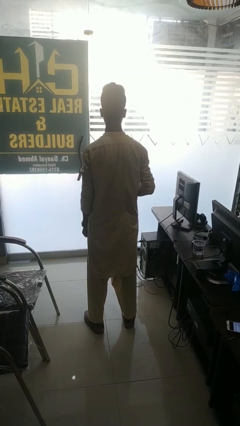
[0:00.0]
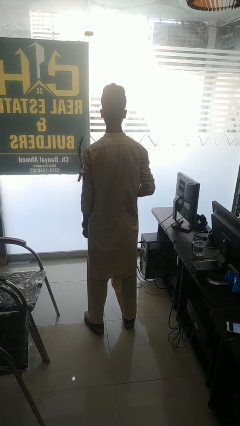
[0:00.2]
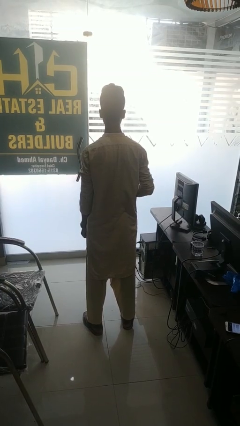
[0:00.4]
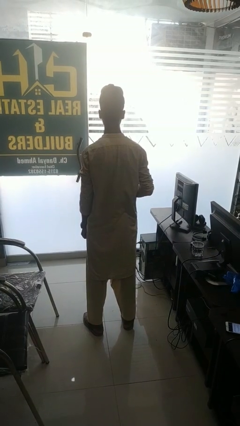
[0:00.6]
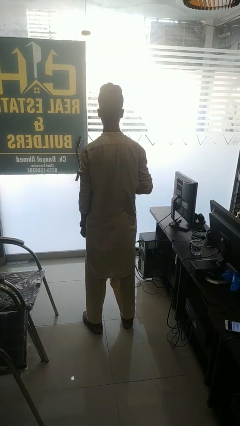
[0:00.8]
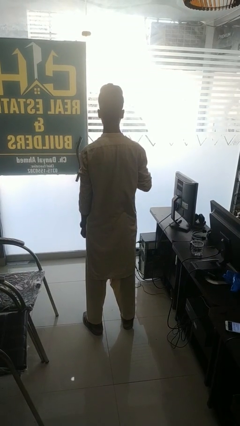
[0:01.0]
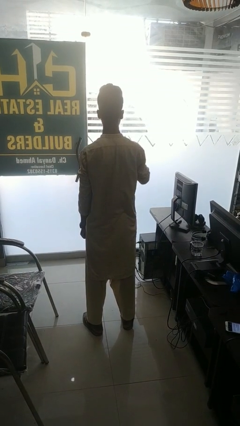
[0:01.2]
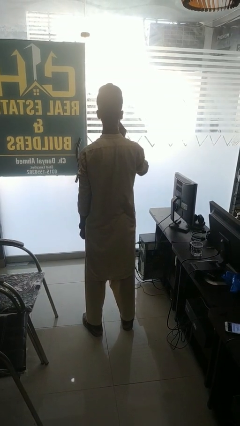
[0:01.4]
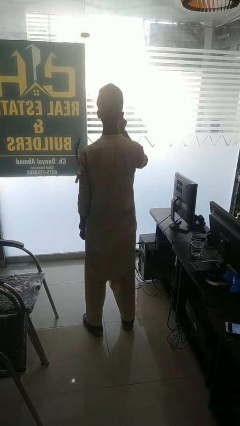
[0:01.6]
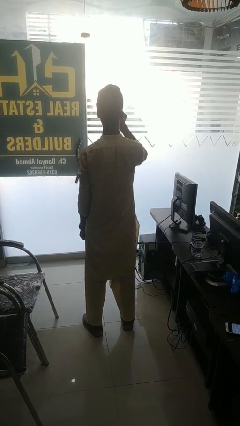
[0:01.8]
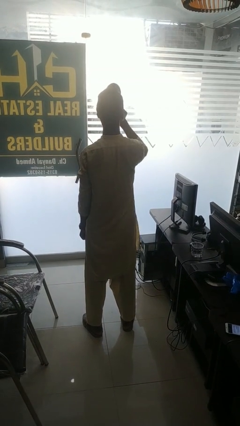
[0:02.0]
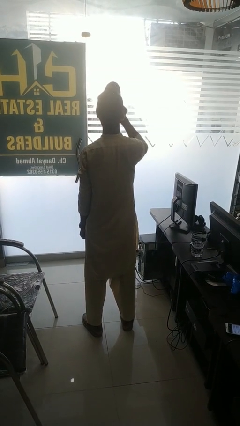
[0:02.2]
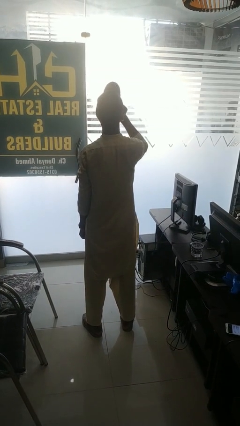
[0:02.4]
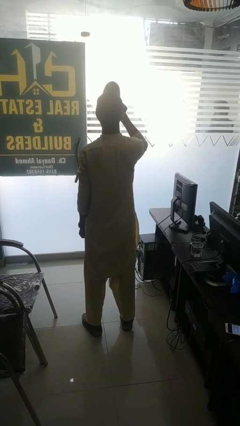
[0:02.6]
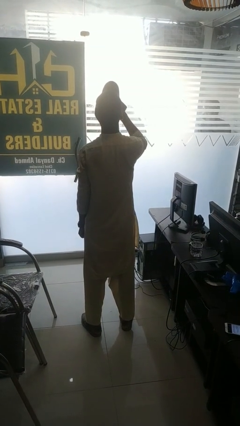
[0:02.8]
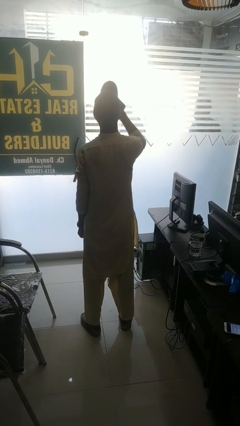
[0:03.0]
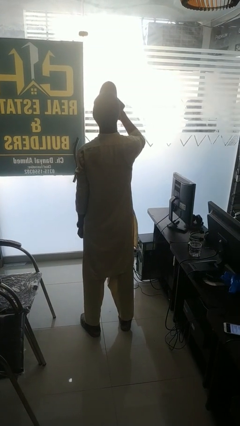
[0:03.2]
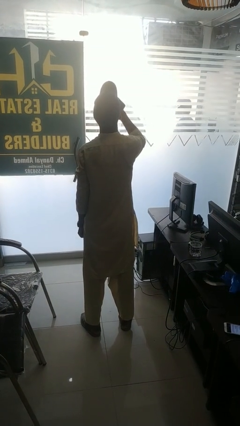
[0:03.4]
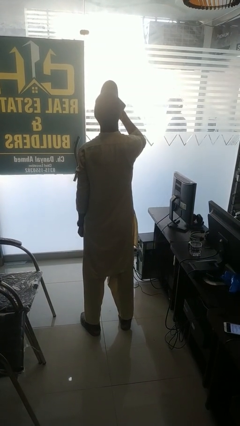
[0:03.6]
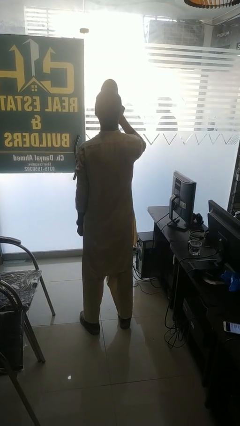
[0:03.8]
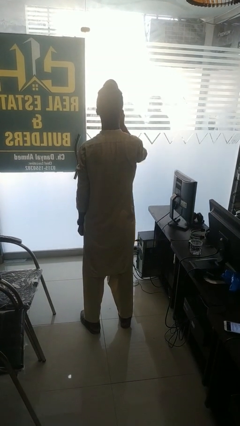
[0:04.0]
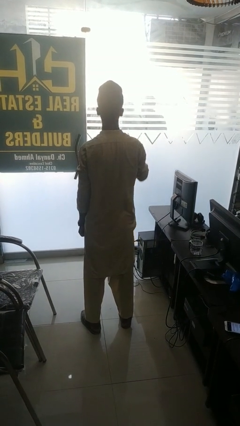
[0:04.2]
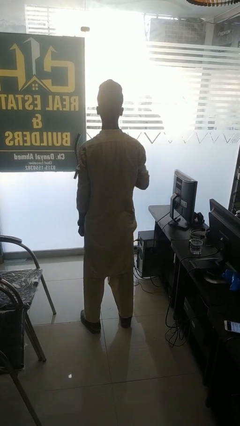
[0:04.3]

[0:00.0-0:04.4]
person drinks from bottle

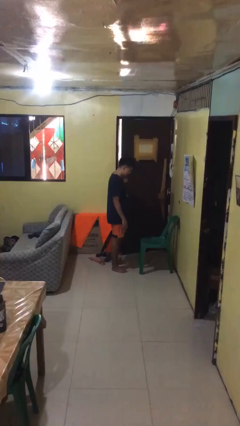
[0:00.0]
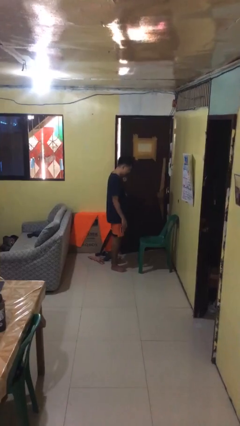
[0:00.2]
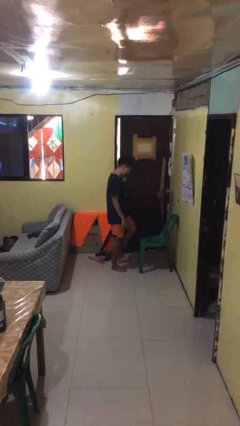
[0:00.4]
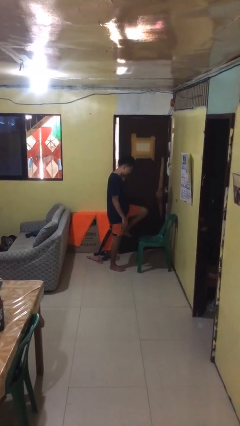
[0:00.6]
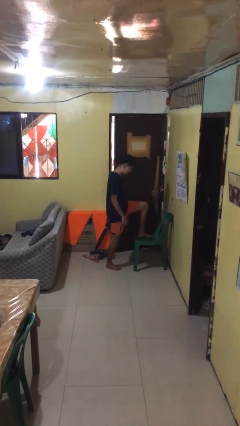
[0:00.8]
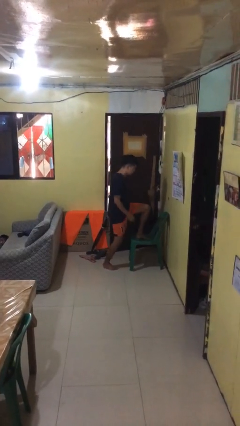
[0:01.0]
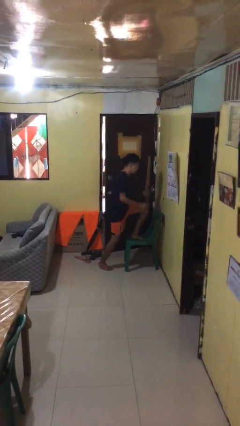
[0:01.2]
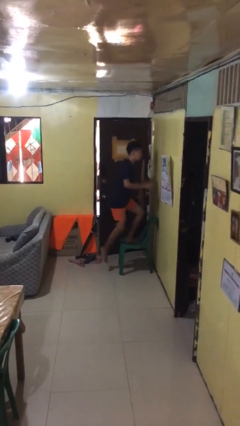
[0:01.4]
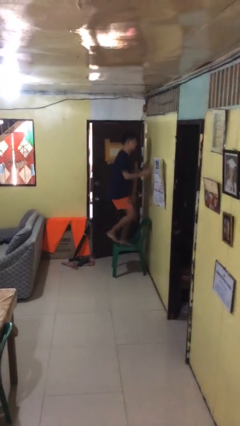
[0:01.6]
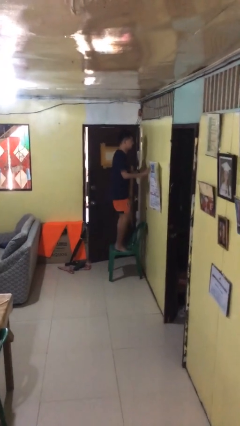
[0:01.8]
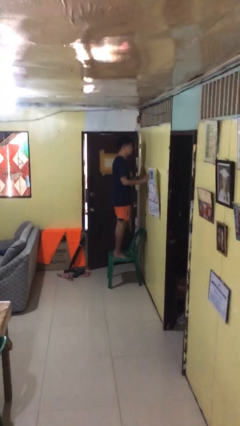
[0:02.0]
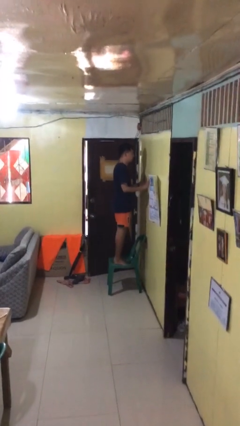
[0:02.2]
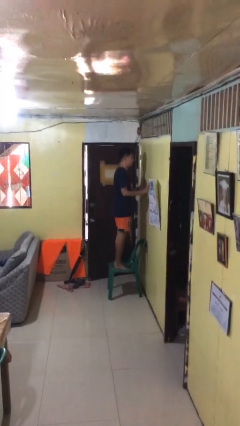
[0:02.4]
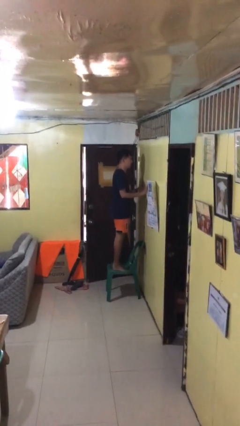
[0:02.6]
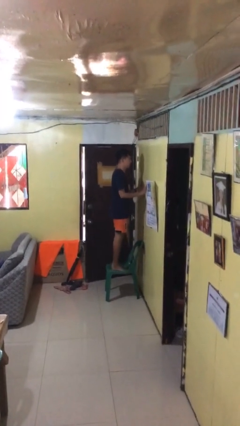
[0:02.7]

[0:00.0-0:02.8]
person climbs on chair

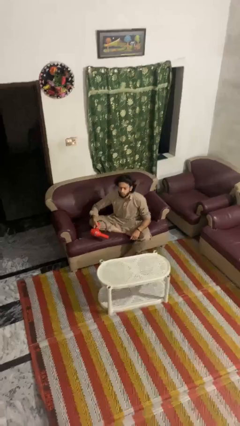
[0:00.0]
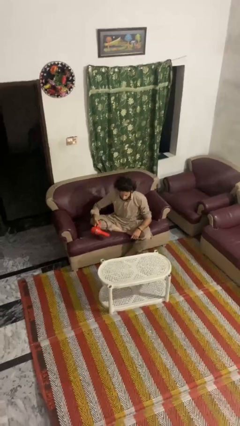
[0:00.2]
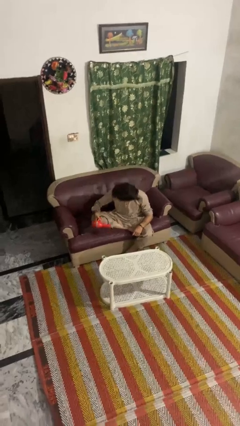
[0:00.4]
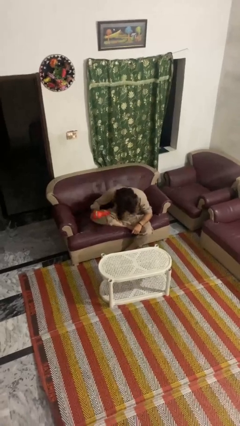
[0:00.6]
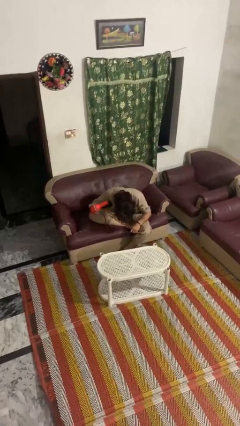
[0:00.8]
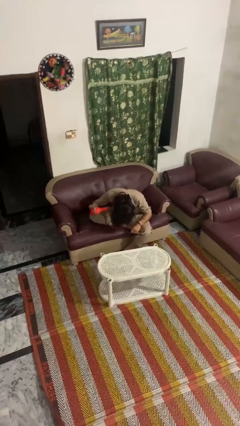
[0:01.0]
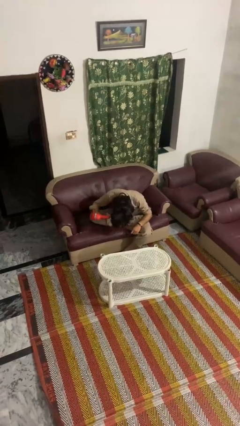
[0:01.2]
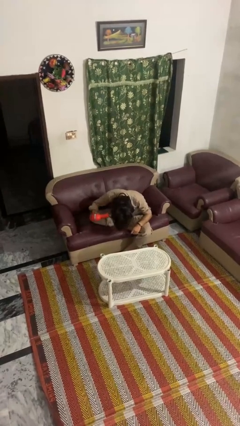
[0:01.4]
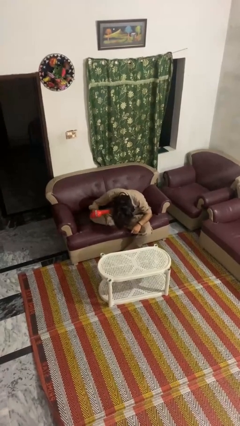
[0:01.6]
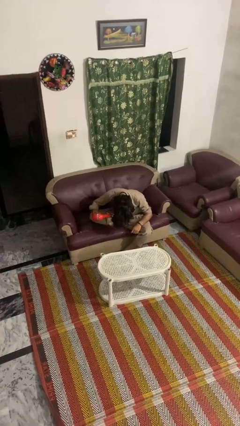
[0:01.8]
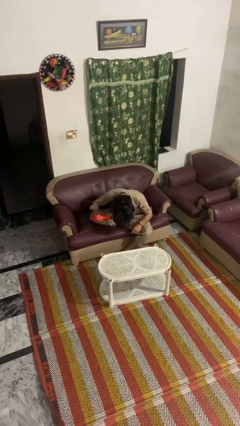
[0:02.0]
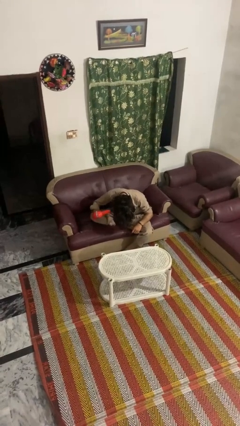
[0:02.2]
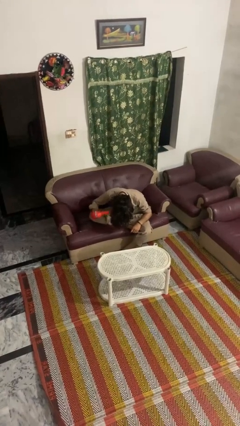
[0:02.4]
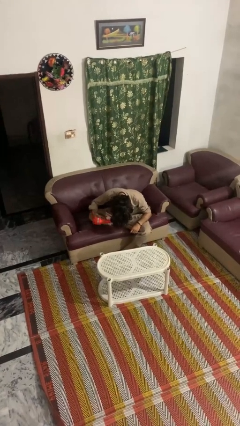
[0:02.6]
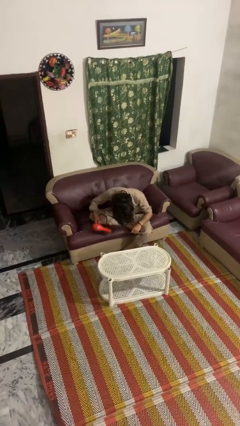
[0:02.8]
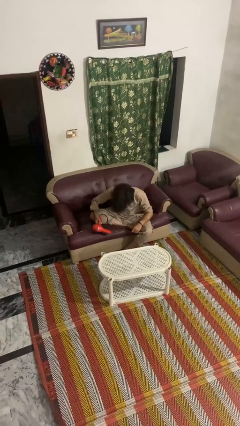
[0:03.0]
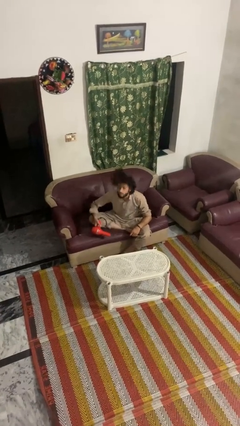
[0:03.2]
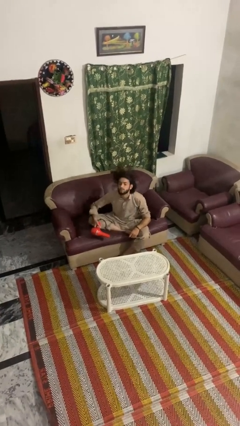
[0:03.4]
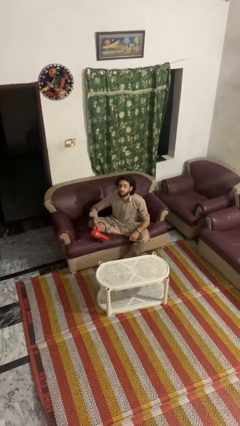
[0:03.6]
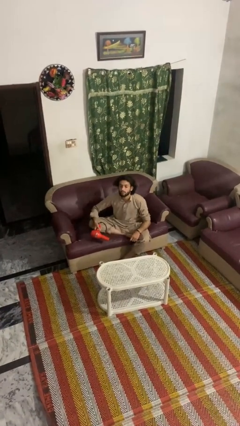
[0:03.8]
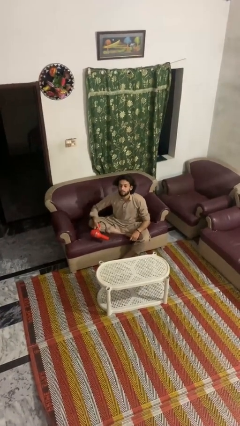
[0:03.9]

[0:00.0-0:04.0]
person dries hair with hairdryer

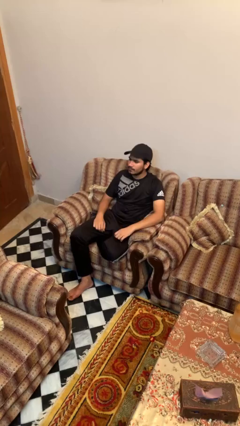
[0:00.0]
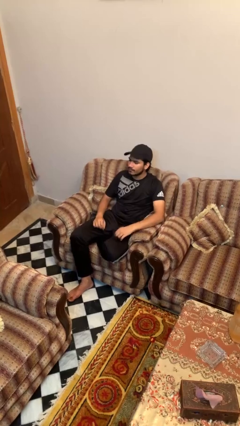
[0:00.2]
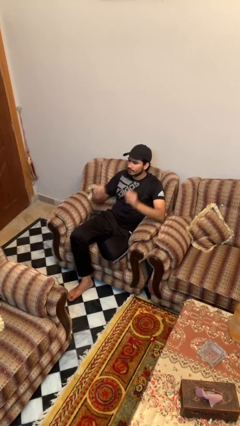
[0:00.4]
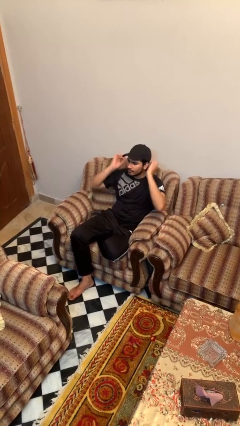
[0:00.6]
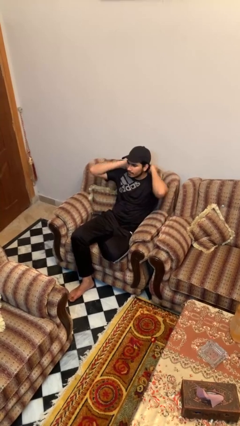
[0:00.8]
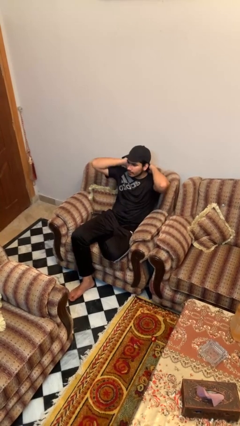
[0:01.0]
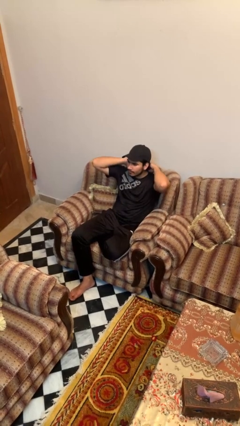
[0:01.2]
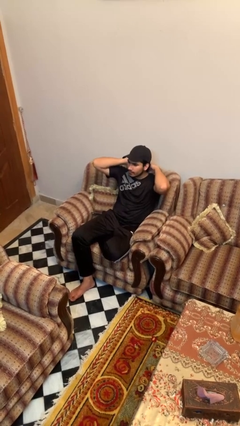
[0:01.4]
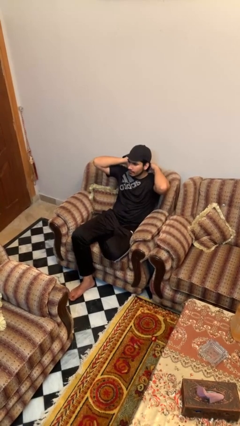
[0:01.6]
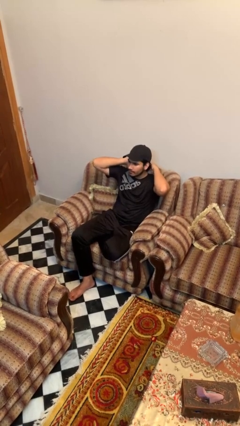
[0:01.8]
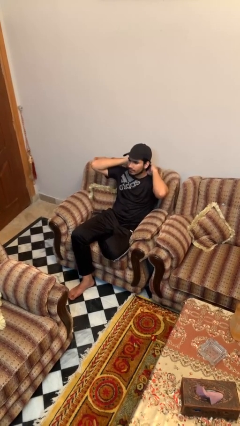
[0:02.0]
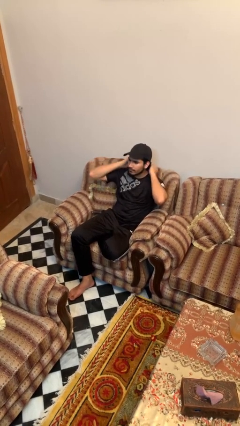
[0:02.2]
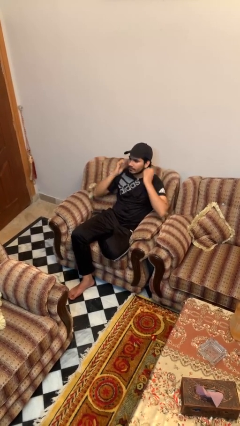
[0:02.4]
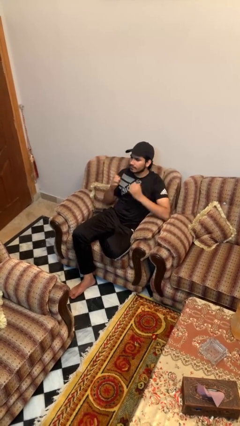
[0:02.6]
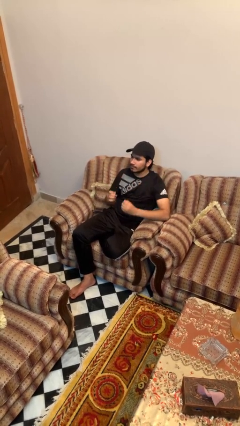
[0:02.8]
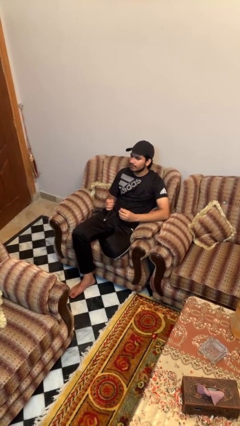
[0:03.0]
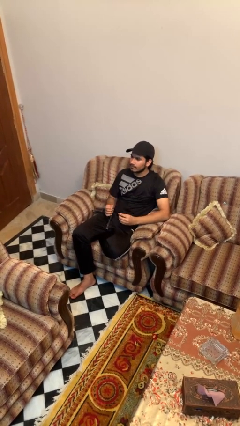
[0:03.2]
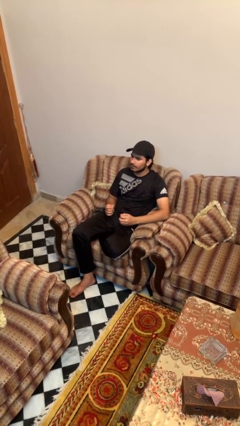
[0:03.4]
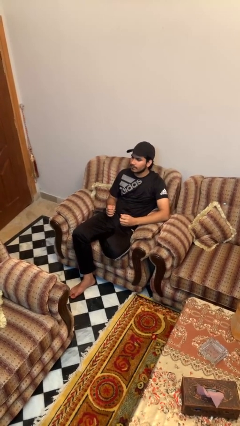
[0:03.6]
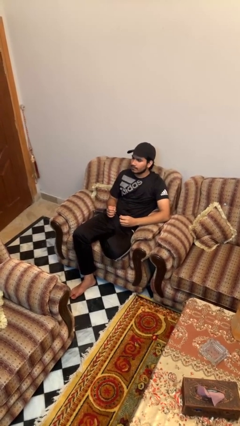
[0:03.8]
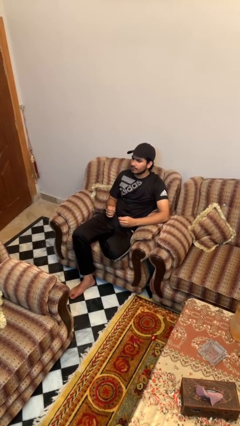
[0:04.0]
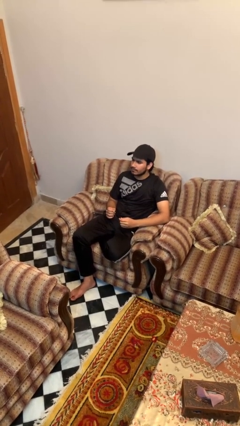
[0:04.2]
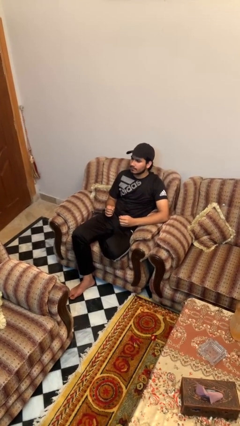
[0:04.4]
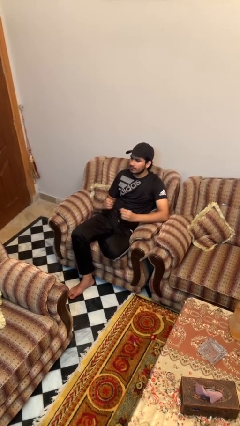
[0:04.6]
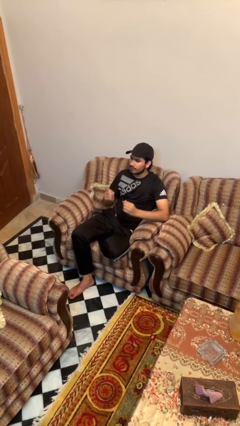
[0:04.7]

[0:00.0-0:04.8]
person takes off necklace

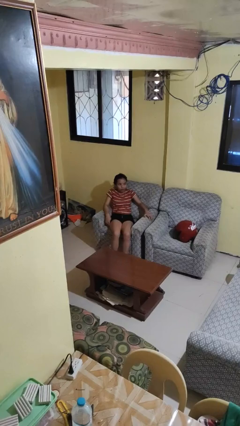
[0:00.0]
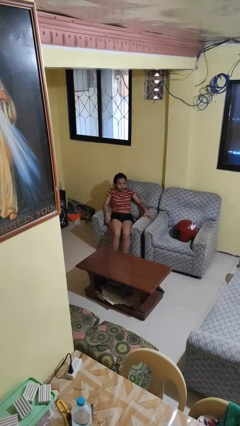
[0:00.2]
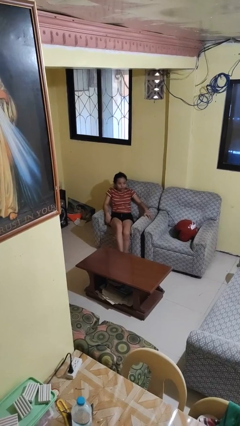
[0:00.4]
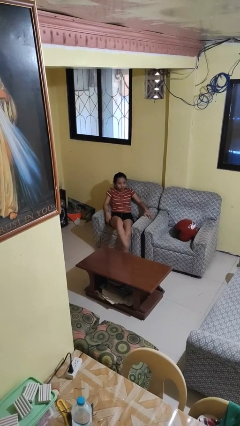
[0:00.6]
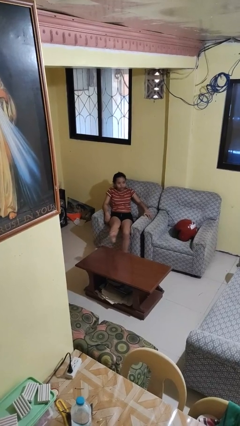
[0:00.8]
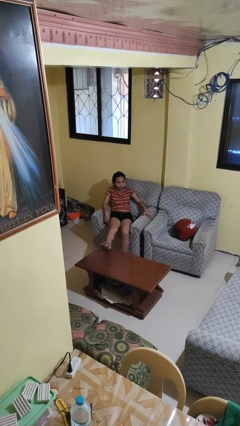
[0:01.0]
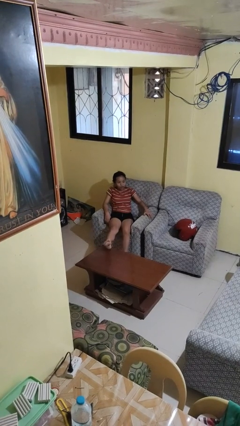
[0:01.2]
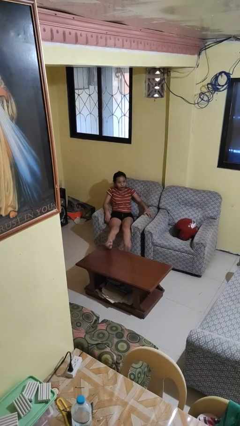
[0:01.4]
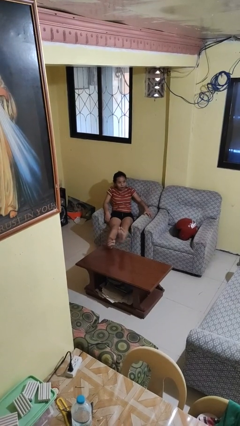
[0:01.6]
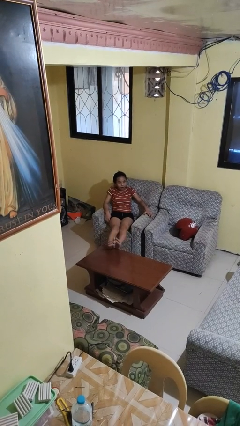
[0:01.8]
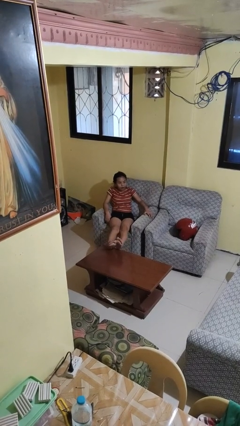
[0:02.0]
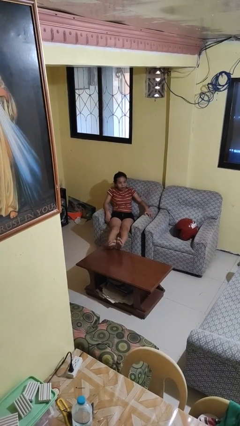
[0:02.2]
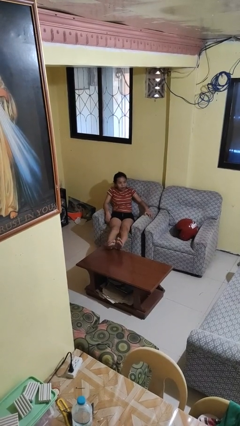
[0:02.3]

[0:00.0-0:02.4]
person puts feet up
